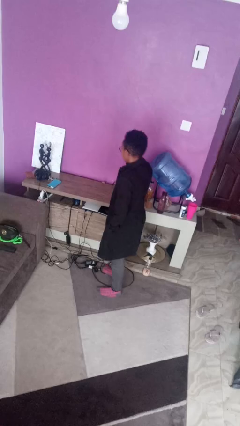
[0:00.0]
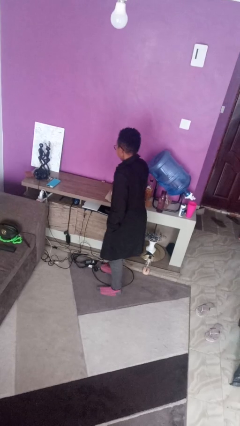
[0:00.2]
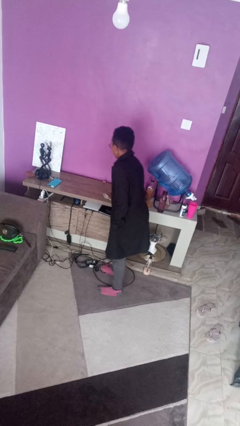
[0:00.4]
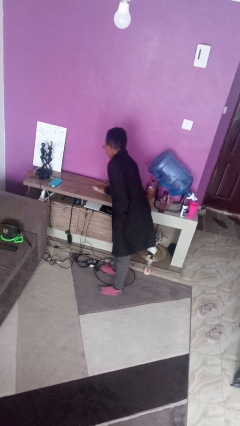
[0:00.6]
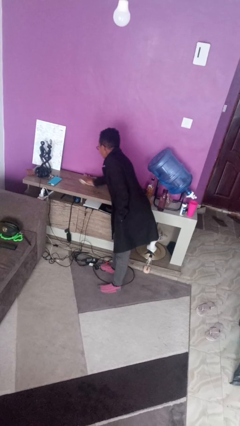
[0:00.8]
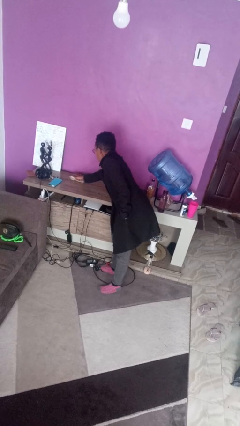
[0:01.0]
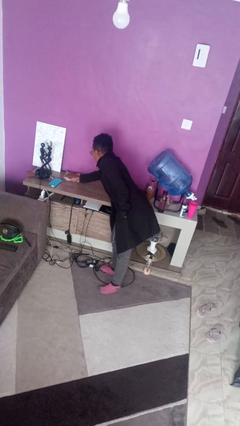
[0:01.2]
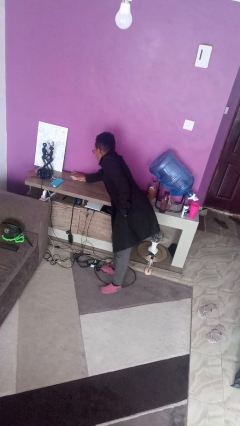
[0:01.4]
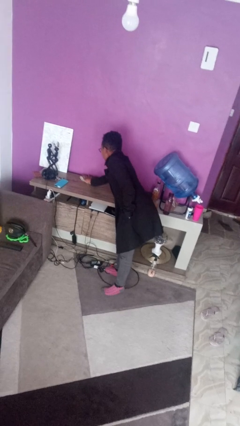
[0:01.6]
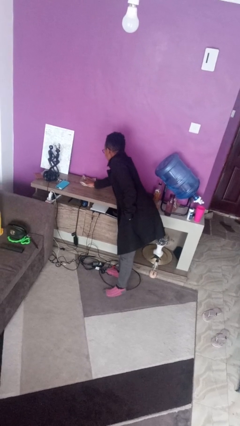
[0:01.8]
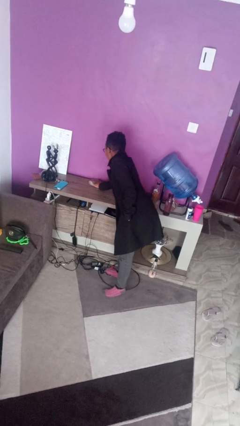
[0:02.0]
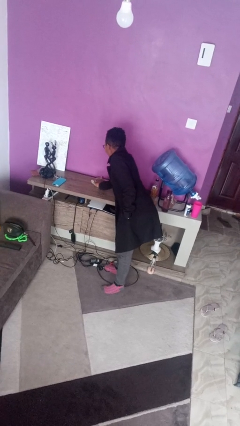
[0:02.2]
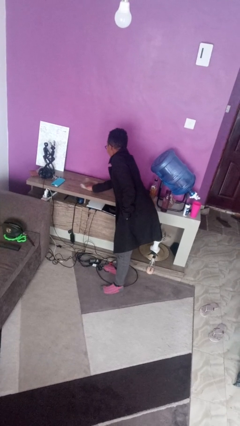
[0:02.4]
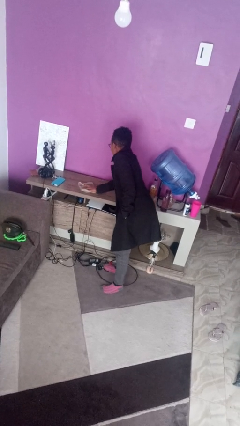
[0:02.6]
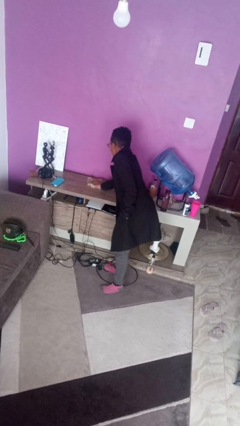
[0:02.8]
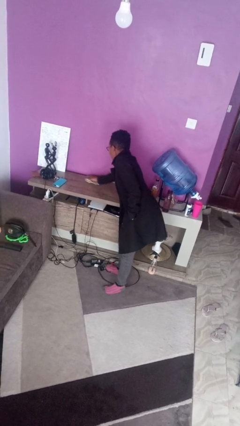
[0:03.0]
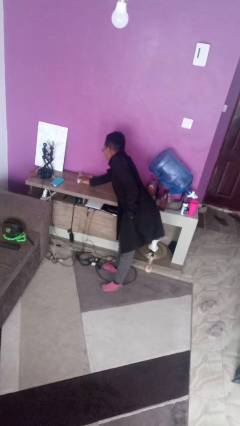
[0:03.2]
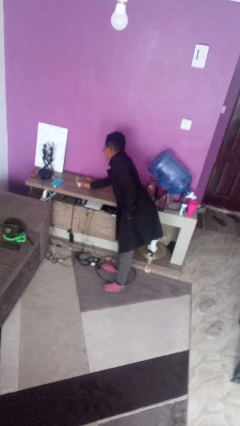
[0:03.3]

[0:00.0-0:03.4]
person cleans table with rag

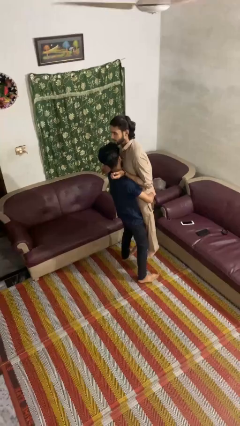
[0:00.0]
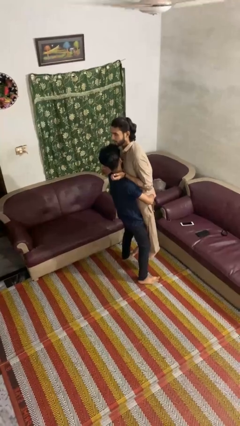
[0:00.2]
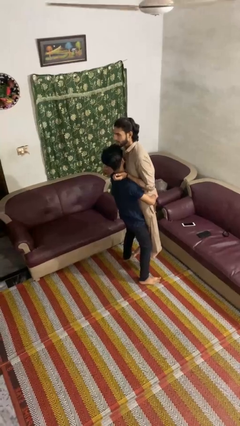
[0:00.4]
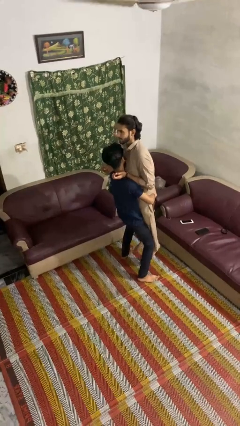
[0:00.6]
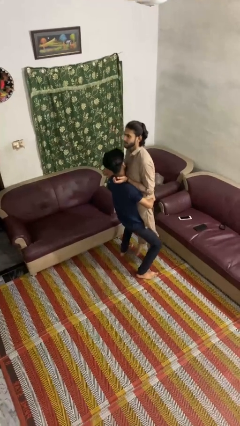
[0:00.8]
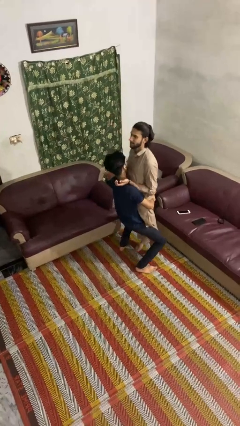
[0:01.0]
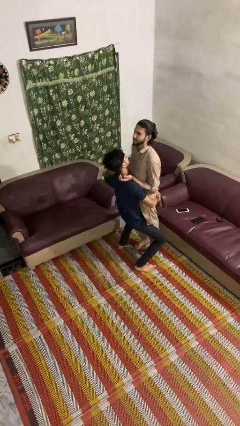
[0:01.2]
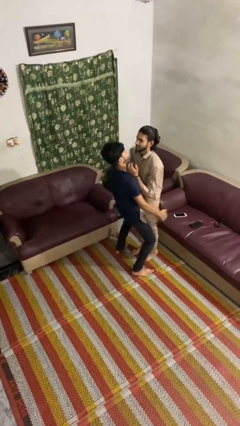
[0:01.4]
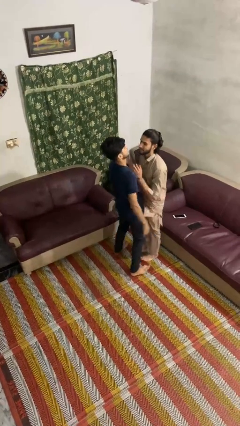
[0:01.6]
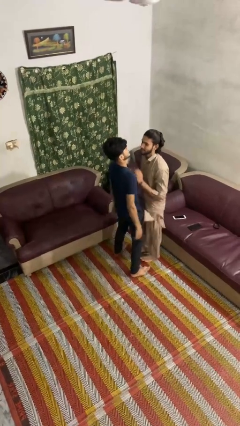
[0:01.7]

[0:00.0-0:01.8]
person puts down person

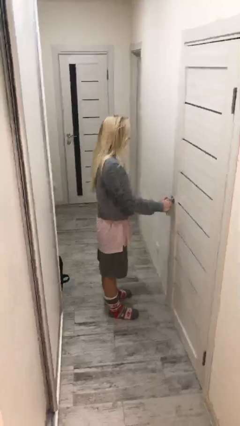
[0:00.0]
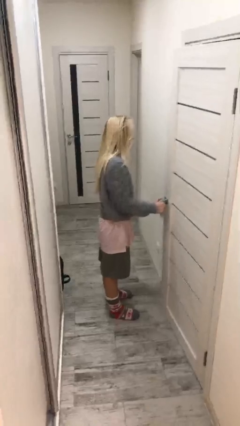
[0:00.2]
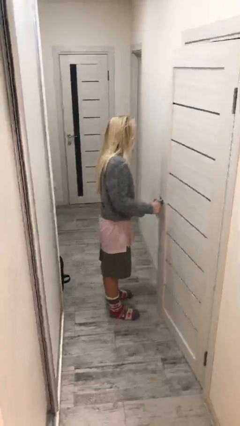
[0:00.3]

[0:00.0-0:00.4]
person opens facility door

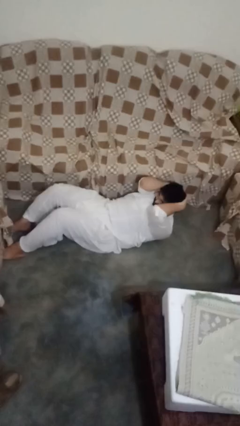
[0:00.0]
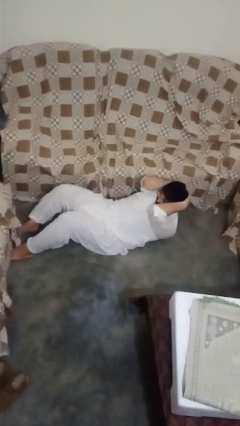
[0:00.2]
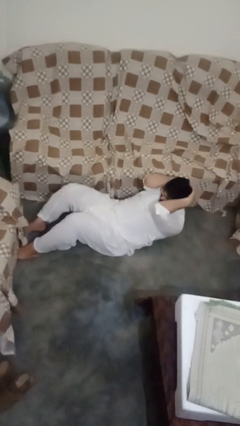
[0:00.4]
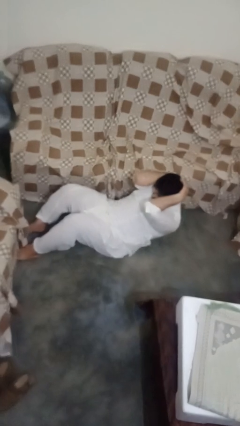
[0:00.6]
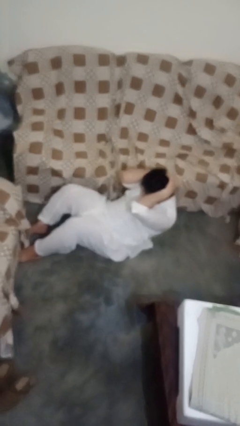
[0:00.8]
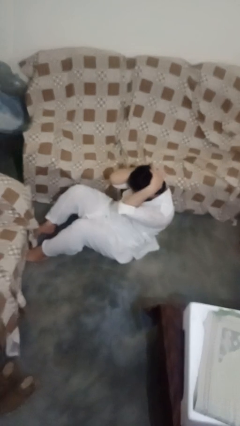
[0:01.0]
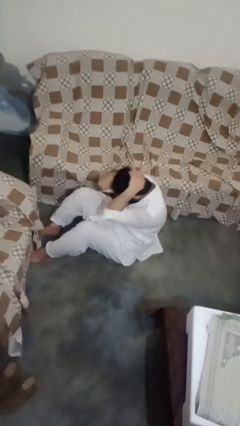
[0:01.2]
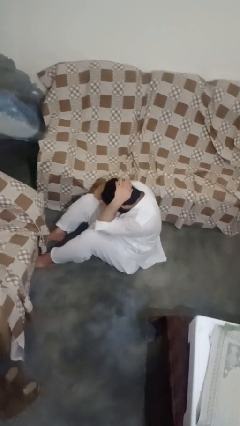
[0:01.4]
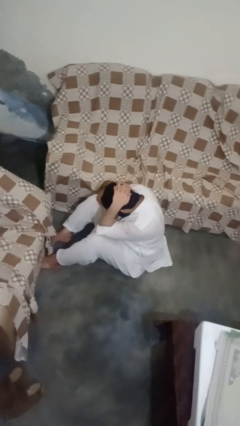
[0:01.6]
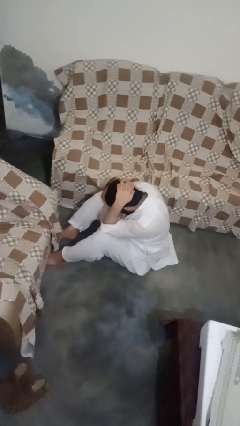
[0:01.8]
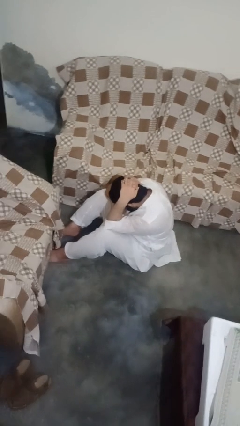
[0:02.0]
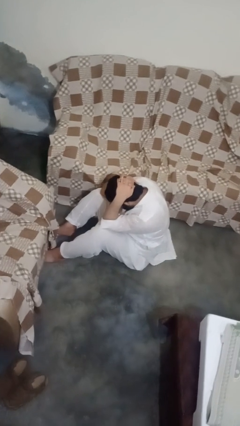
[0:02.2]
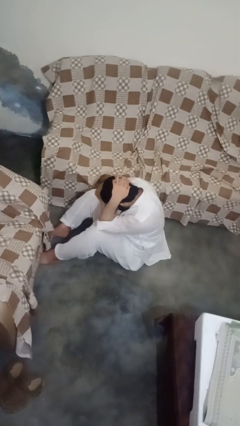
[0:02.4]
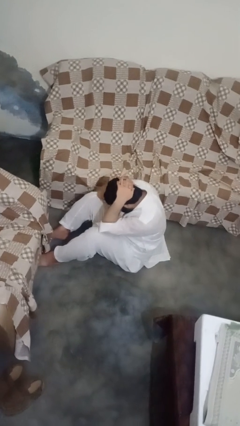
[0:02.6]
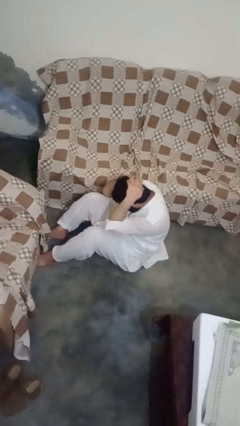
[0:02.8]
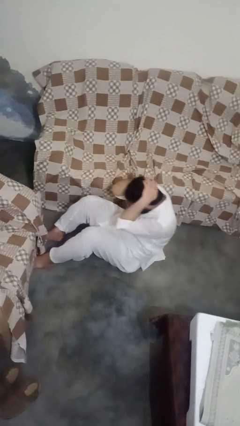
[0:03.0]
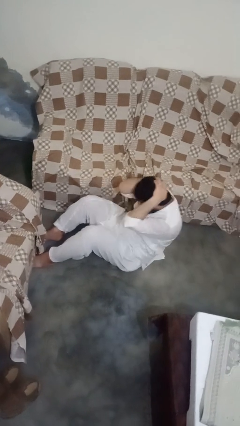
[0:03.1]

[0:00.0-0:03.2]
person exercises with situp

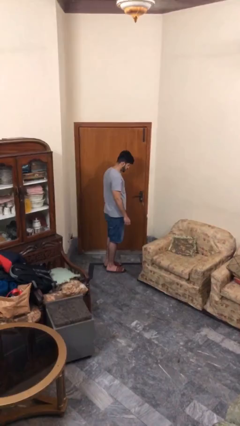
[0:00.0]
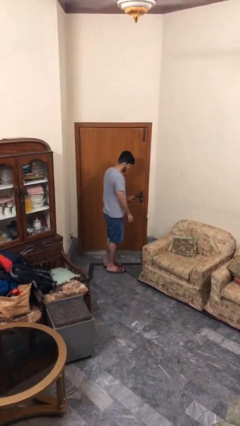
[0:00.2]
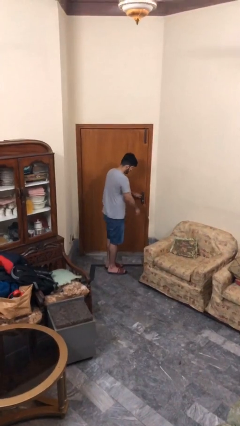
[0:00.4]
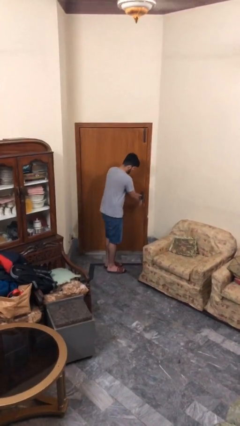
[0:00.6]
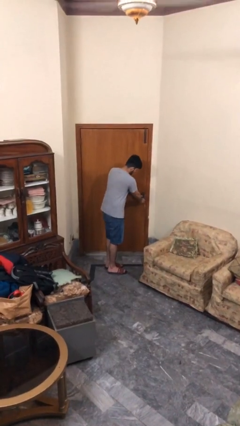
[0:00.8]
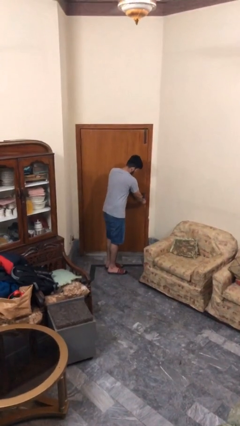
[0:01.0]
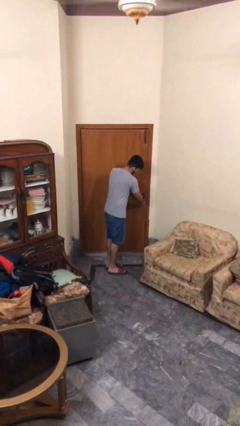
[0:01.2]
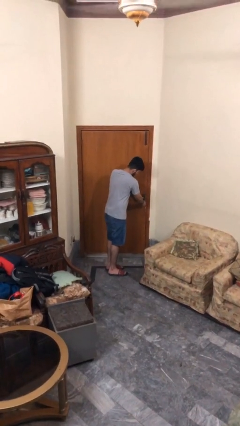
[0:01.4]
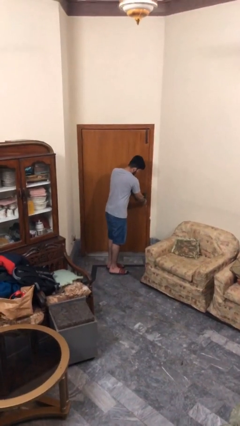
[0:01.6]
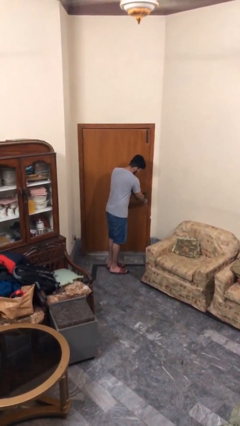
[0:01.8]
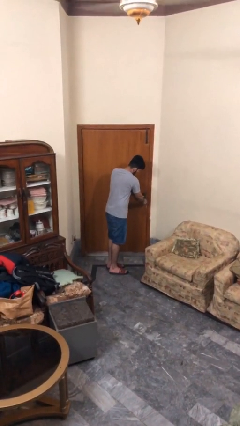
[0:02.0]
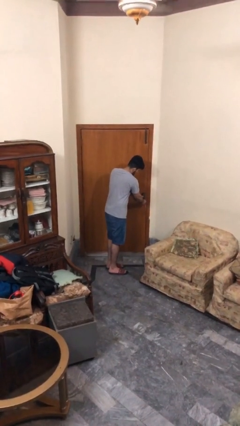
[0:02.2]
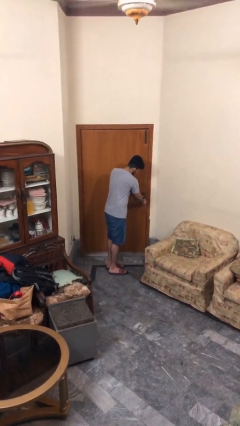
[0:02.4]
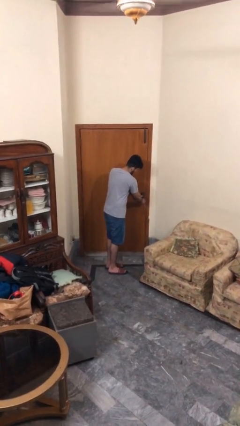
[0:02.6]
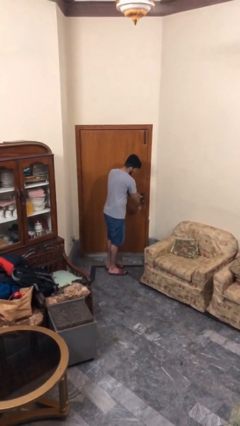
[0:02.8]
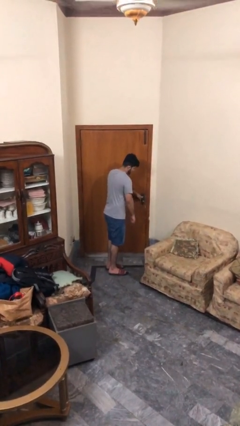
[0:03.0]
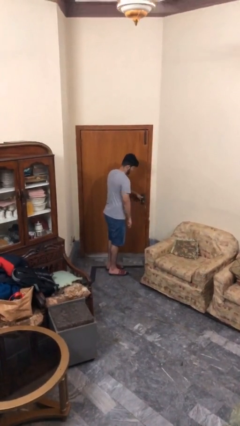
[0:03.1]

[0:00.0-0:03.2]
person unlocks door with keys

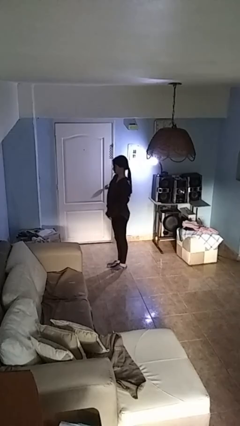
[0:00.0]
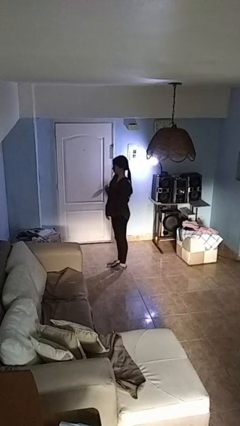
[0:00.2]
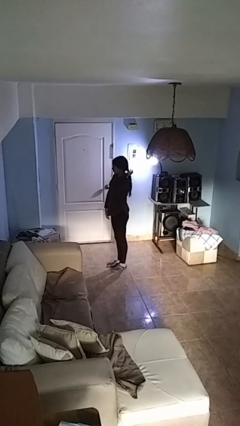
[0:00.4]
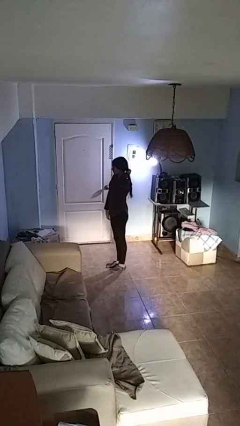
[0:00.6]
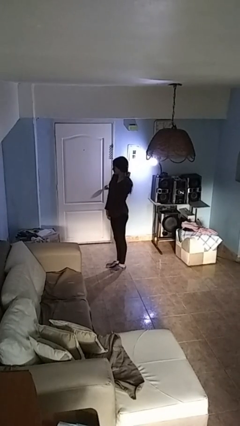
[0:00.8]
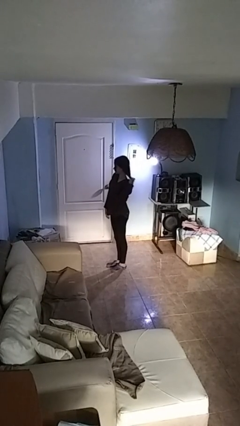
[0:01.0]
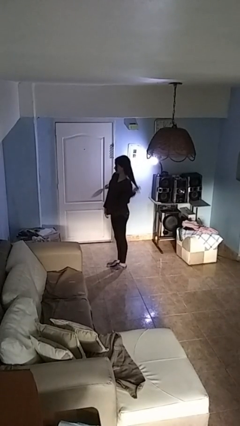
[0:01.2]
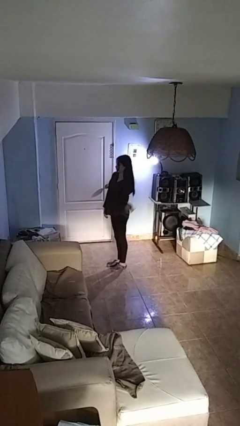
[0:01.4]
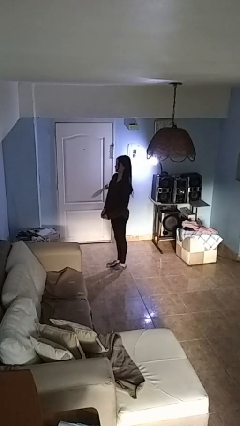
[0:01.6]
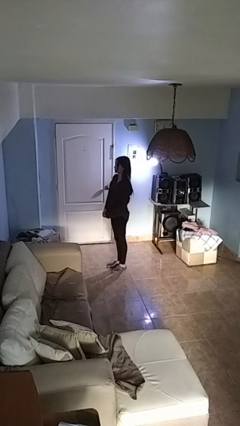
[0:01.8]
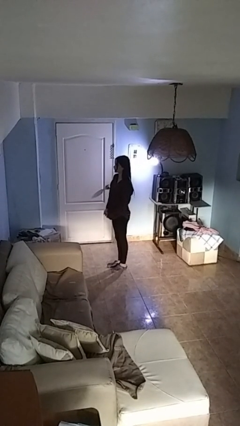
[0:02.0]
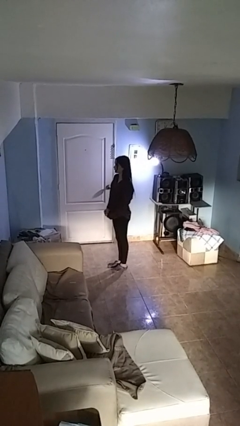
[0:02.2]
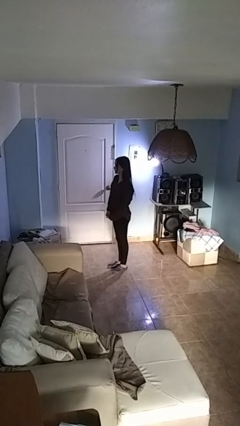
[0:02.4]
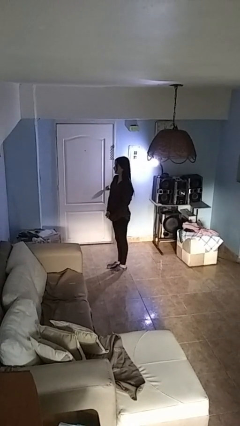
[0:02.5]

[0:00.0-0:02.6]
person takes off hairtie

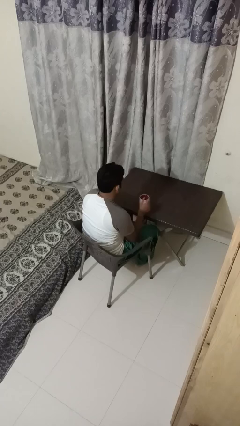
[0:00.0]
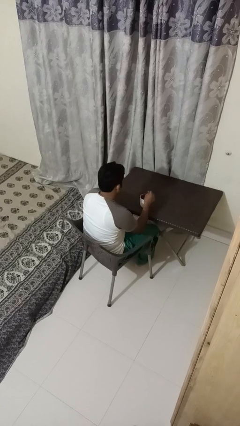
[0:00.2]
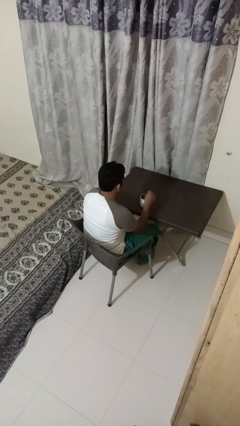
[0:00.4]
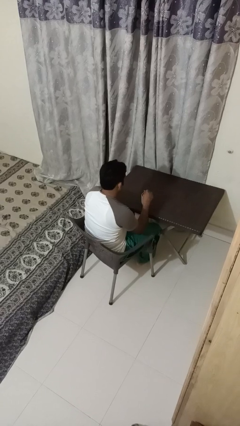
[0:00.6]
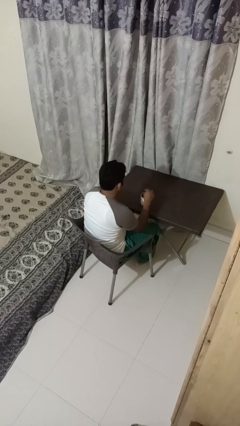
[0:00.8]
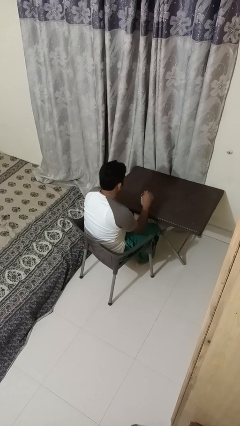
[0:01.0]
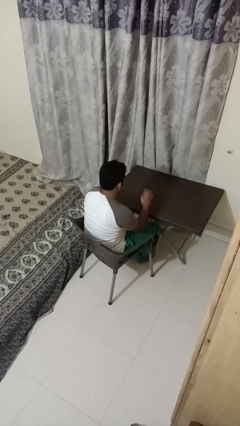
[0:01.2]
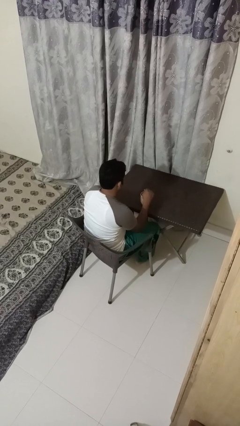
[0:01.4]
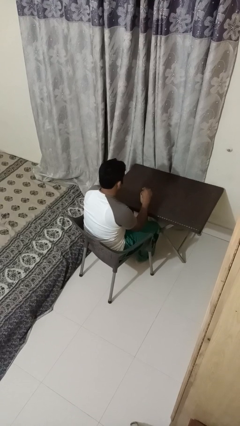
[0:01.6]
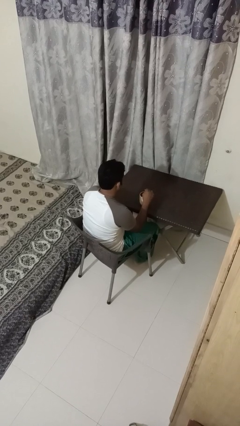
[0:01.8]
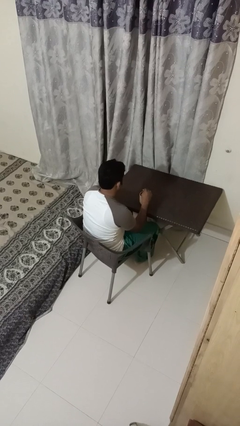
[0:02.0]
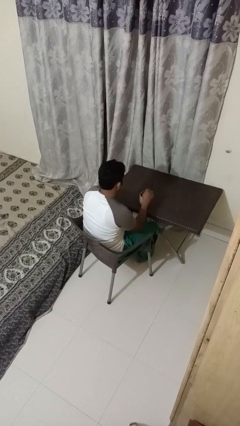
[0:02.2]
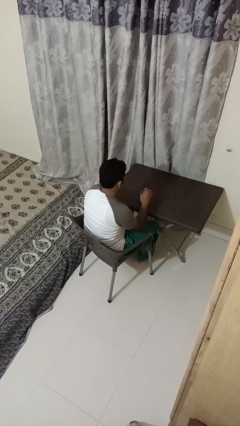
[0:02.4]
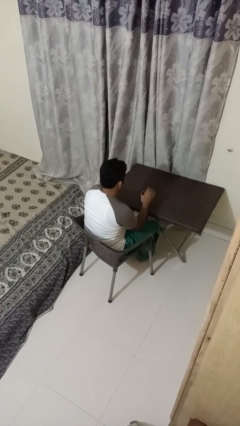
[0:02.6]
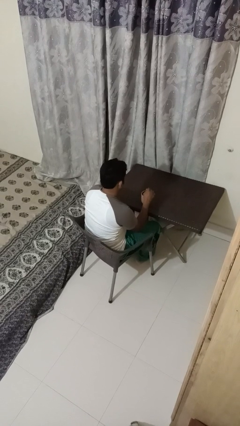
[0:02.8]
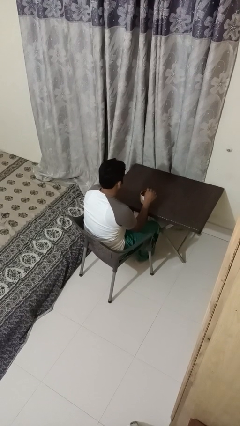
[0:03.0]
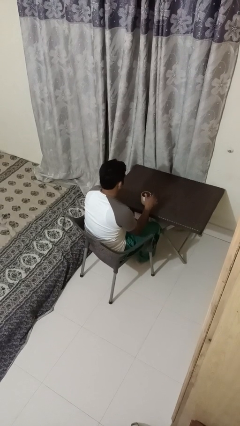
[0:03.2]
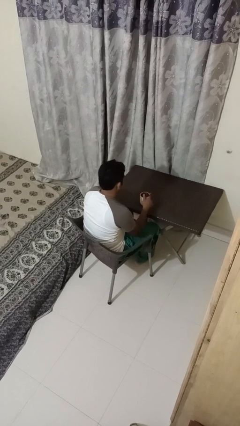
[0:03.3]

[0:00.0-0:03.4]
person stirs mug
